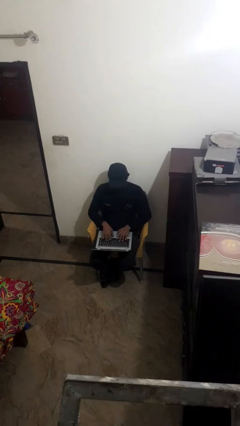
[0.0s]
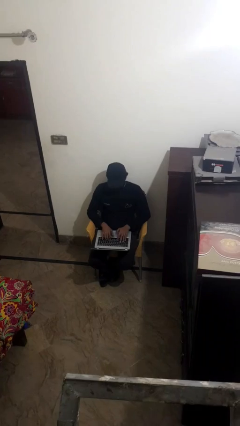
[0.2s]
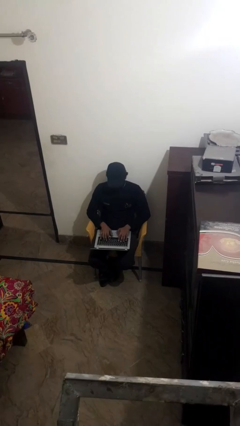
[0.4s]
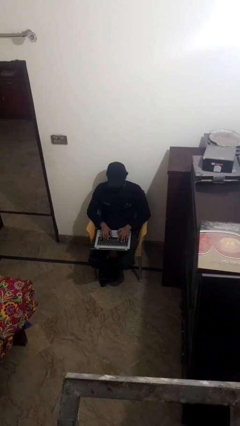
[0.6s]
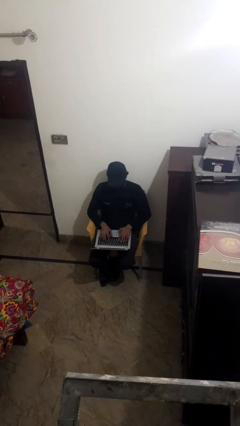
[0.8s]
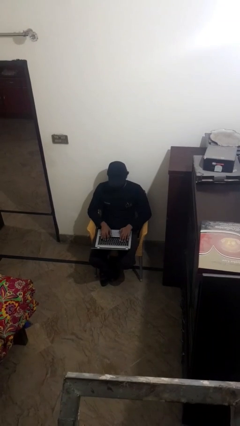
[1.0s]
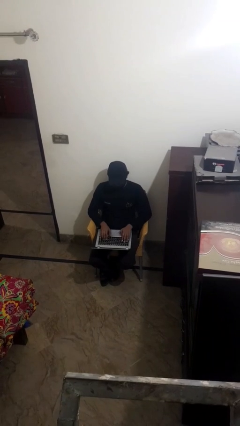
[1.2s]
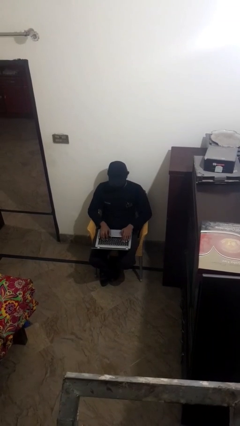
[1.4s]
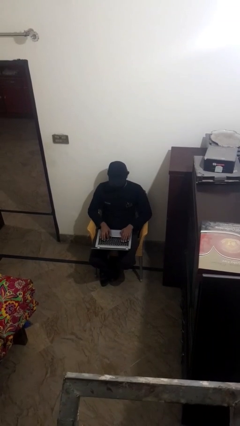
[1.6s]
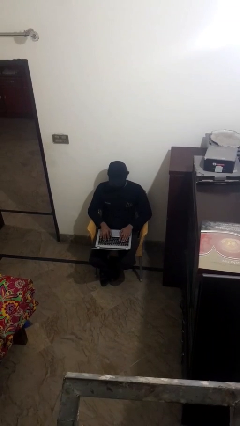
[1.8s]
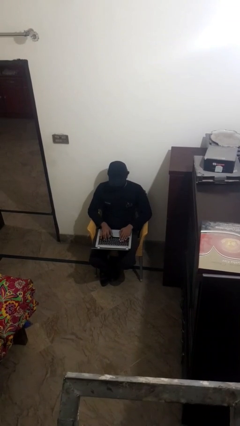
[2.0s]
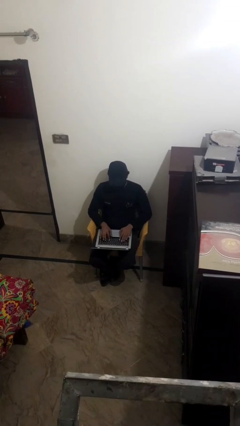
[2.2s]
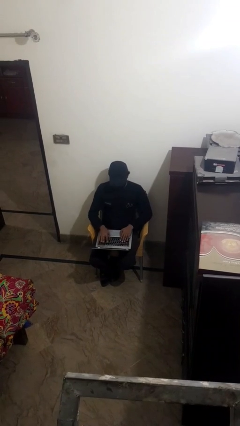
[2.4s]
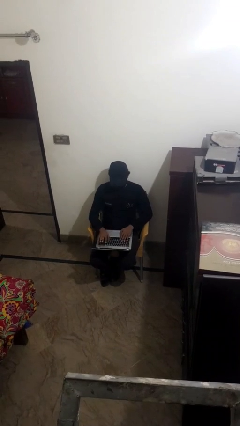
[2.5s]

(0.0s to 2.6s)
person interacts with laptop

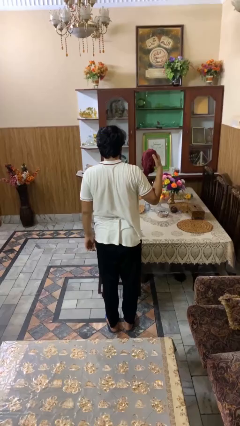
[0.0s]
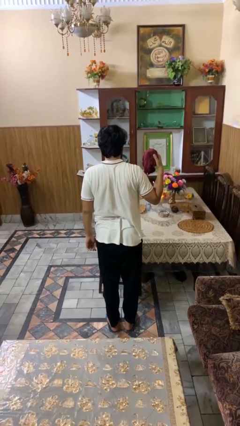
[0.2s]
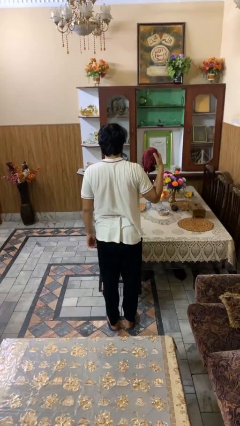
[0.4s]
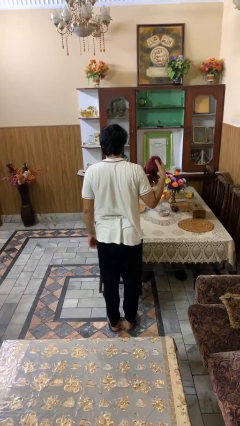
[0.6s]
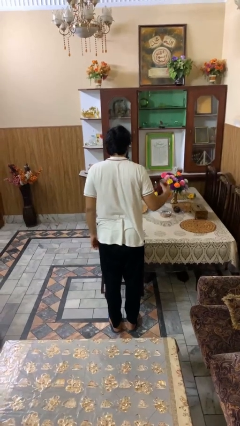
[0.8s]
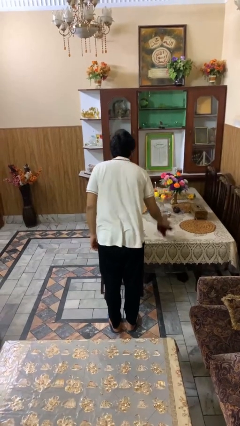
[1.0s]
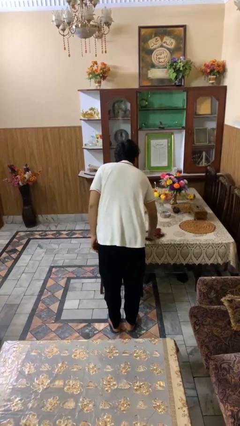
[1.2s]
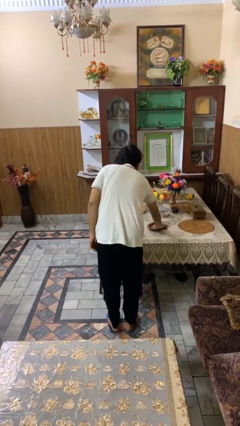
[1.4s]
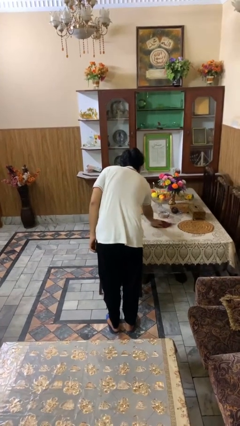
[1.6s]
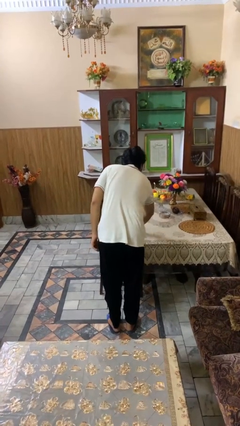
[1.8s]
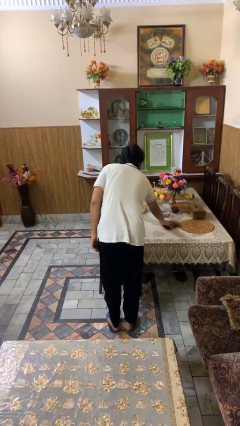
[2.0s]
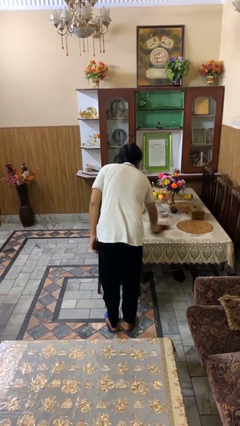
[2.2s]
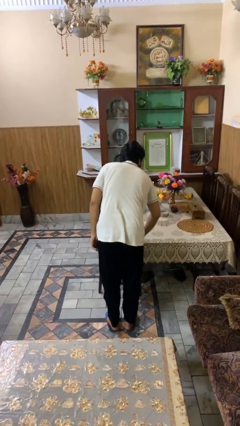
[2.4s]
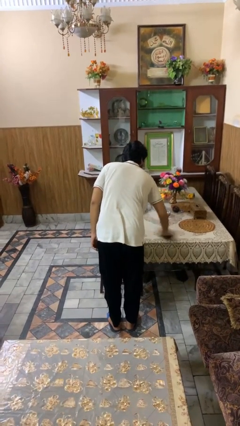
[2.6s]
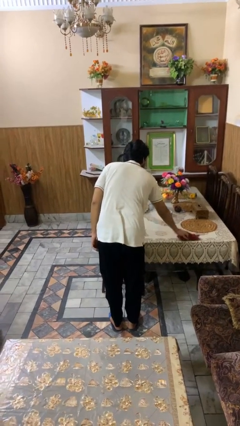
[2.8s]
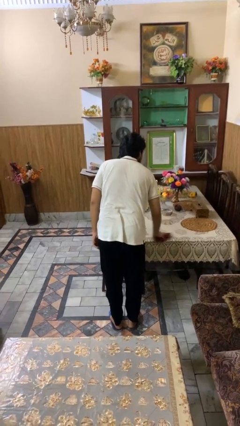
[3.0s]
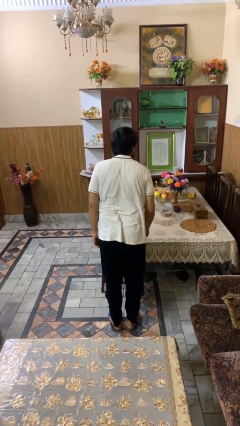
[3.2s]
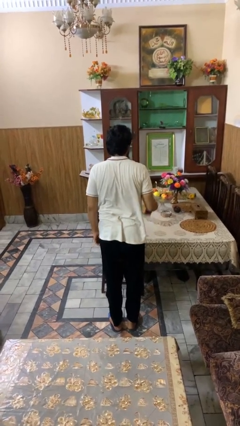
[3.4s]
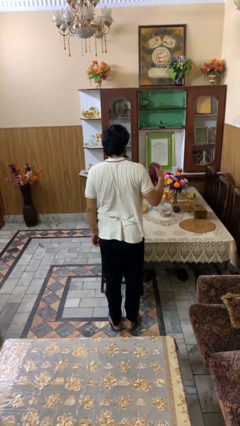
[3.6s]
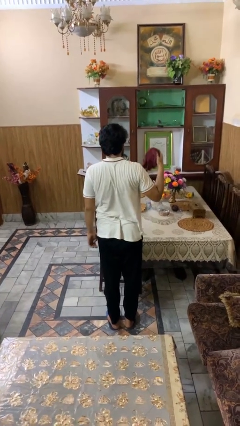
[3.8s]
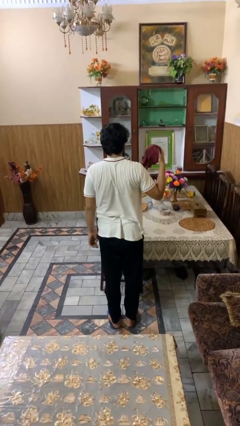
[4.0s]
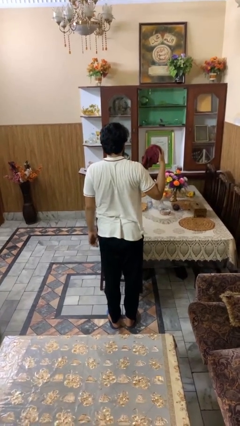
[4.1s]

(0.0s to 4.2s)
person cleans table with rag

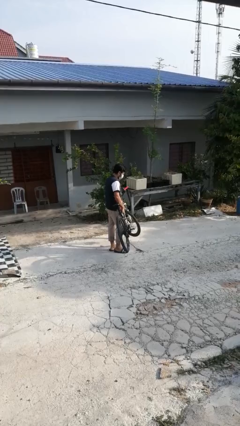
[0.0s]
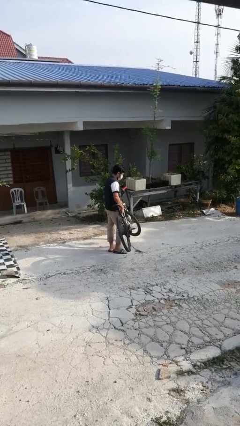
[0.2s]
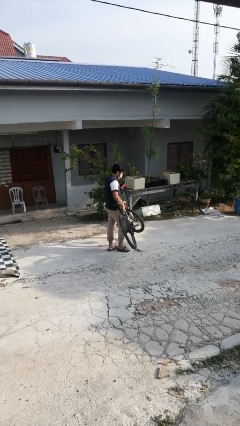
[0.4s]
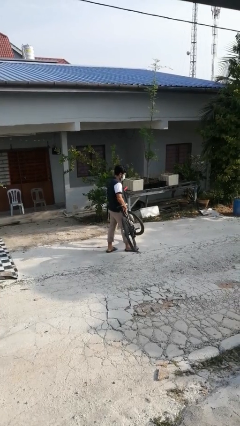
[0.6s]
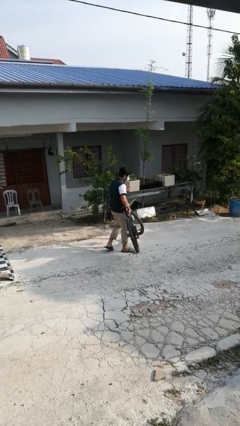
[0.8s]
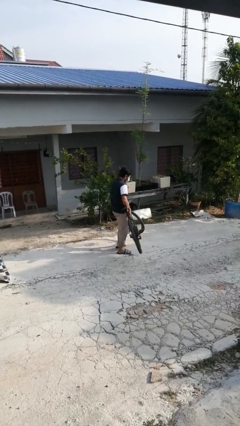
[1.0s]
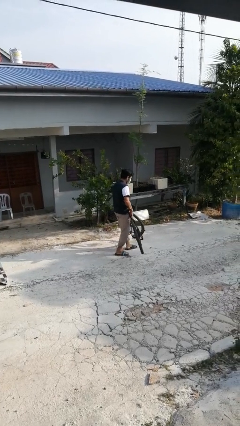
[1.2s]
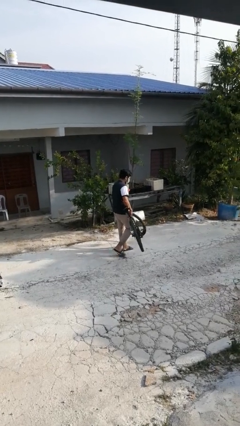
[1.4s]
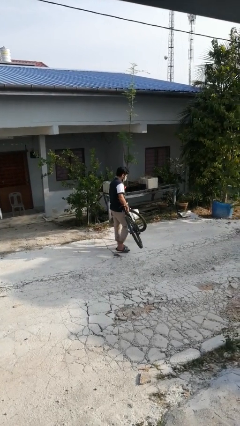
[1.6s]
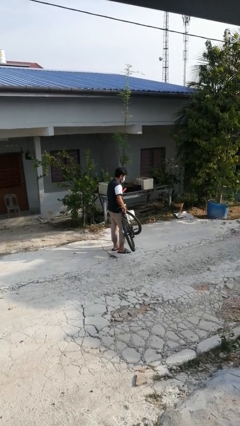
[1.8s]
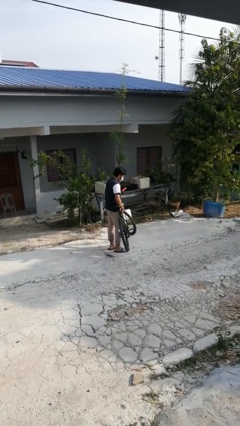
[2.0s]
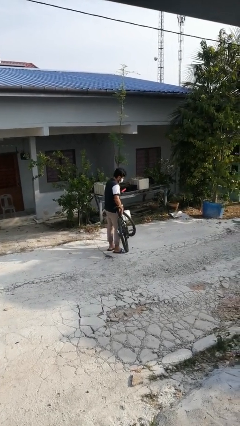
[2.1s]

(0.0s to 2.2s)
person carries bicycle

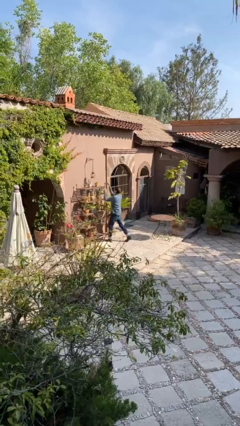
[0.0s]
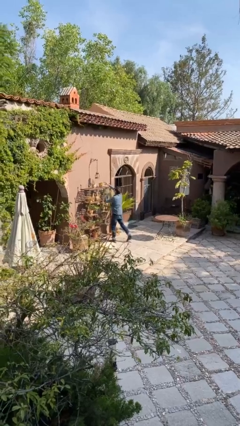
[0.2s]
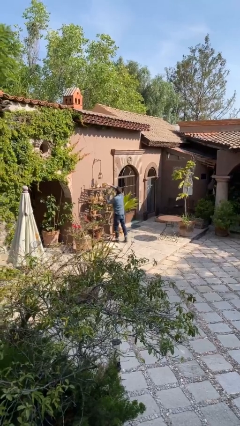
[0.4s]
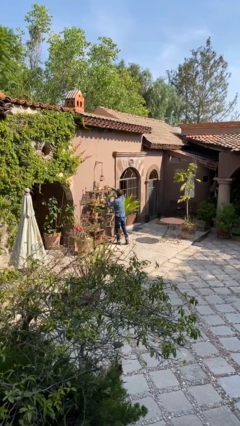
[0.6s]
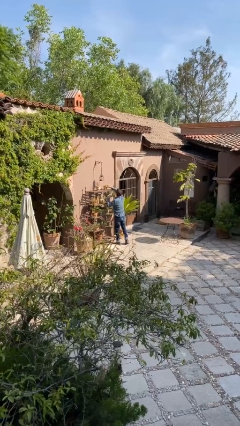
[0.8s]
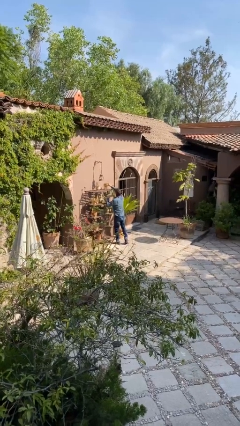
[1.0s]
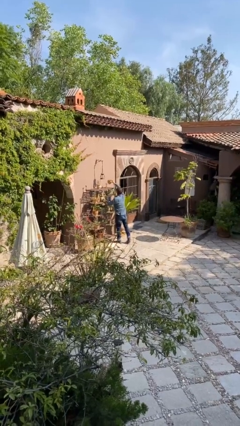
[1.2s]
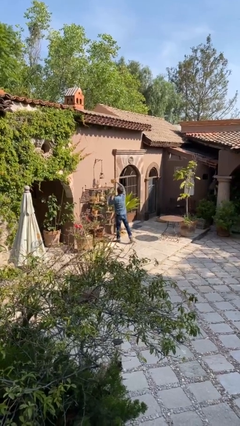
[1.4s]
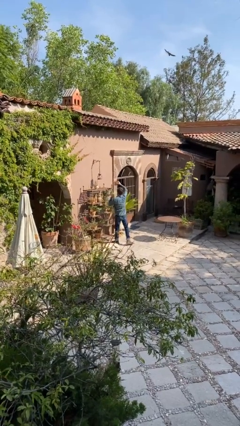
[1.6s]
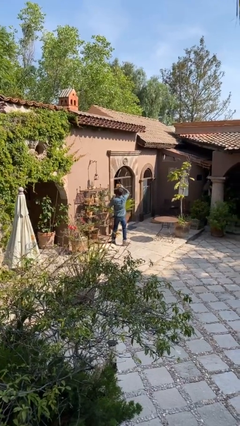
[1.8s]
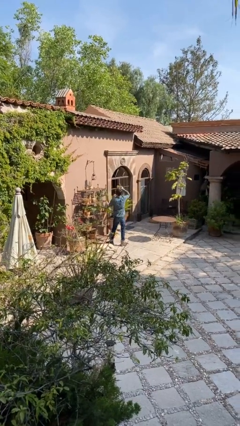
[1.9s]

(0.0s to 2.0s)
person picks up object from shelf

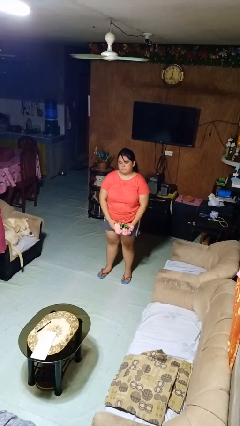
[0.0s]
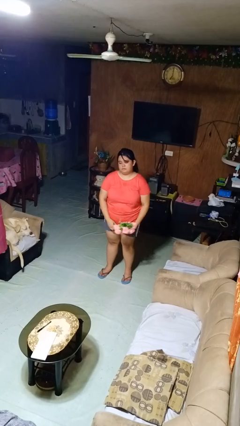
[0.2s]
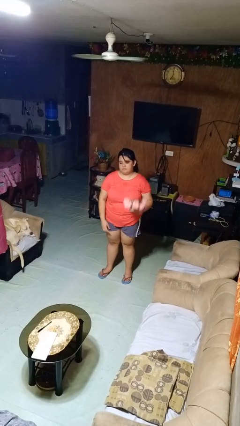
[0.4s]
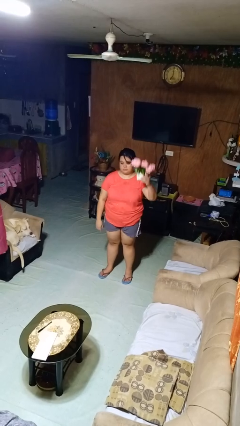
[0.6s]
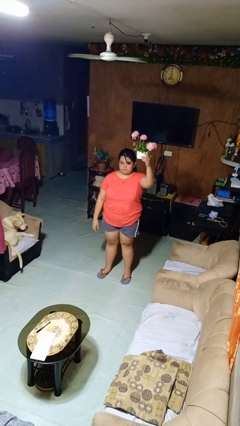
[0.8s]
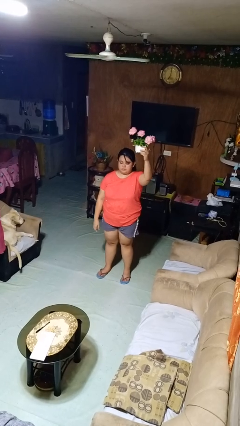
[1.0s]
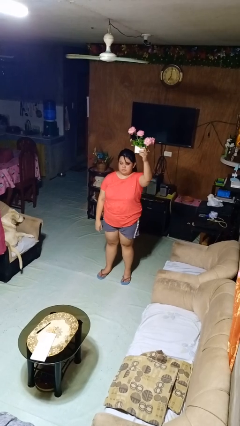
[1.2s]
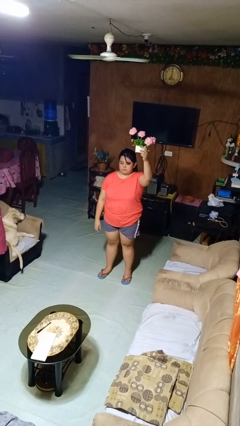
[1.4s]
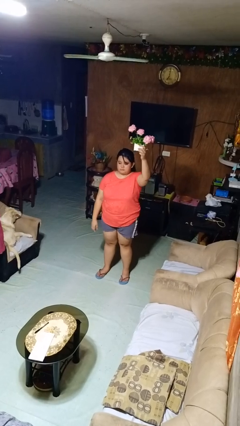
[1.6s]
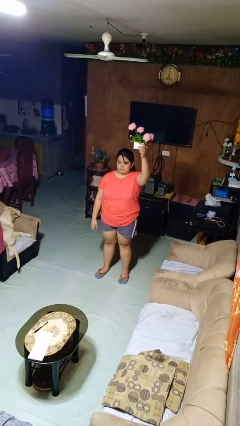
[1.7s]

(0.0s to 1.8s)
person holds object above head

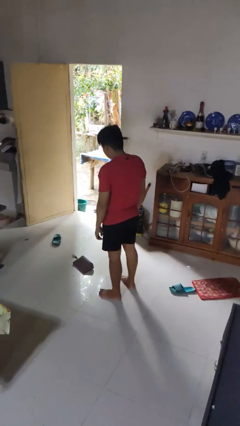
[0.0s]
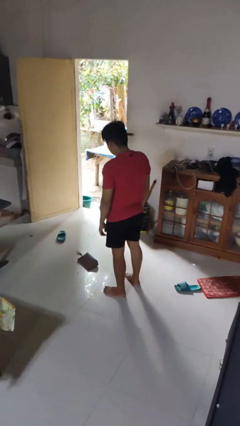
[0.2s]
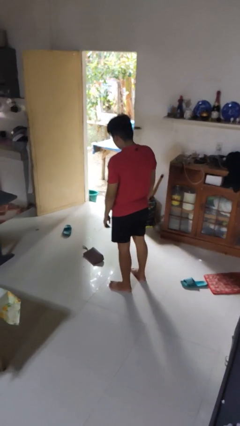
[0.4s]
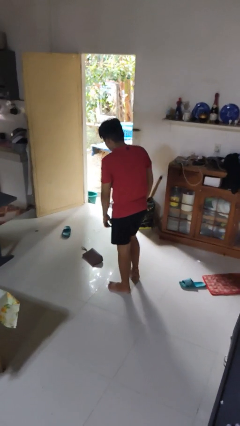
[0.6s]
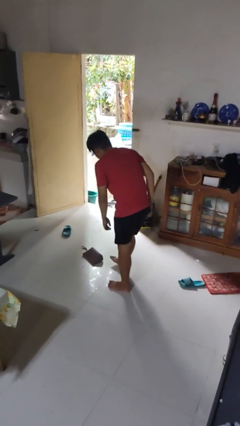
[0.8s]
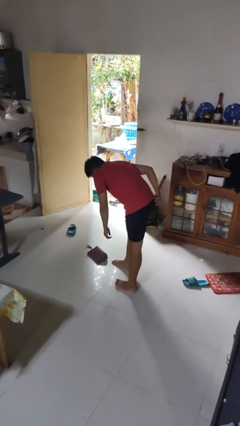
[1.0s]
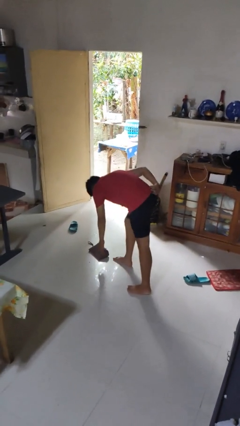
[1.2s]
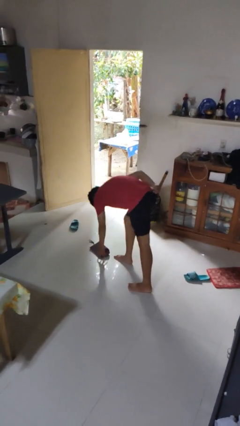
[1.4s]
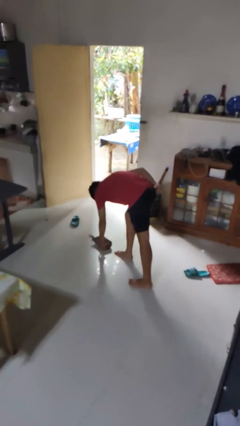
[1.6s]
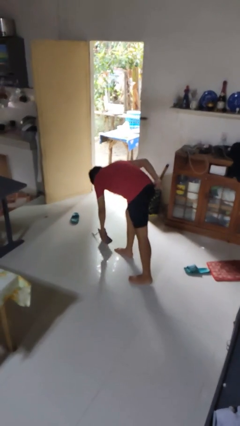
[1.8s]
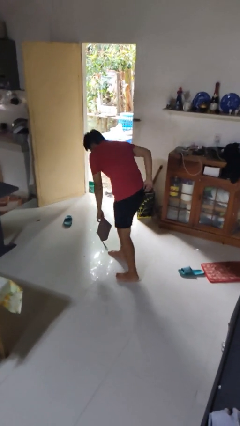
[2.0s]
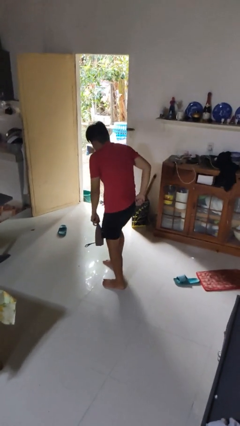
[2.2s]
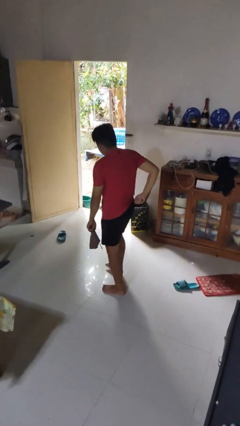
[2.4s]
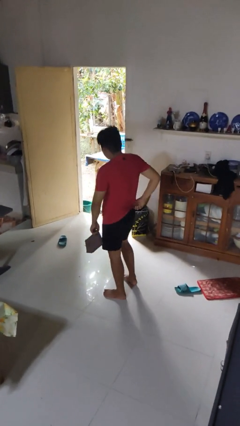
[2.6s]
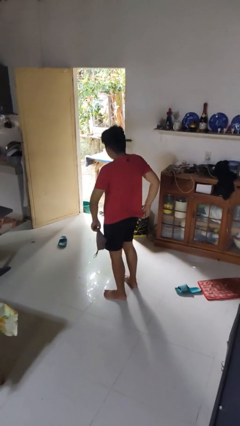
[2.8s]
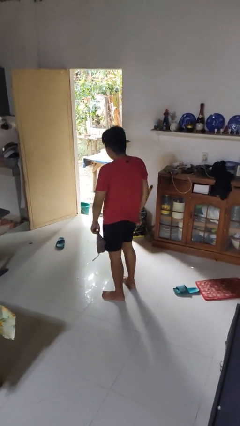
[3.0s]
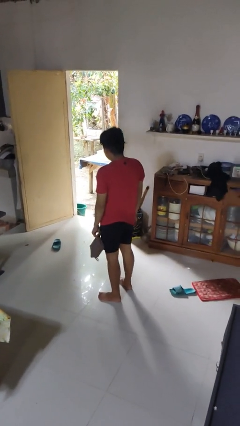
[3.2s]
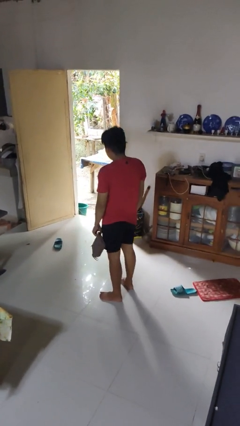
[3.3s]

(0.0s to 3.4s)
person picks up object from floor

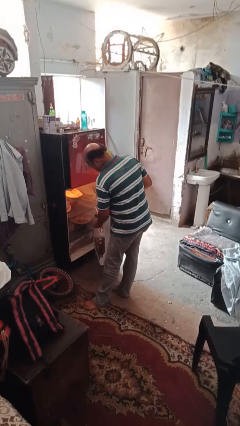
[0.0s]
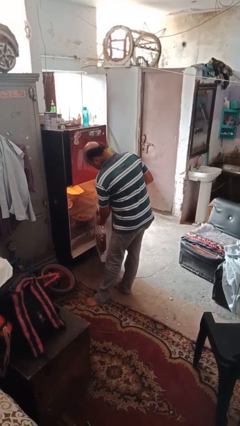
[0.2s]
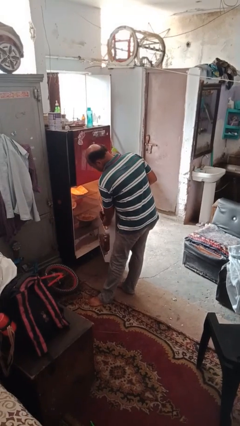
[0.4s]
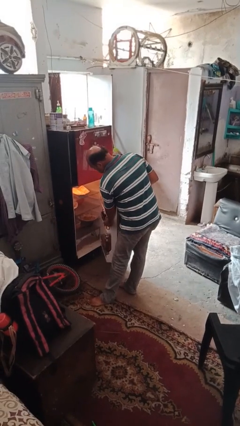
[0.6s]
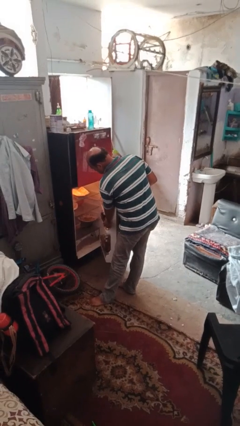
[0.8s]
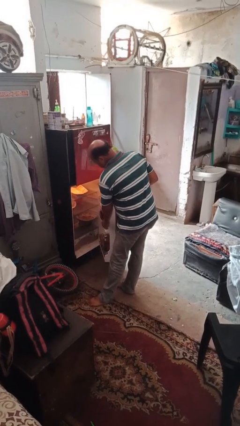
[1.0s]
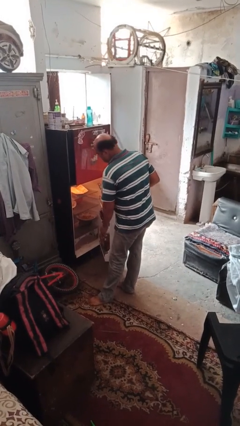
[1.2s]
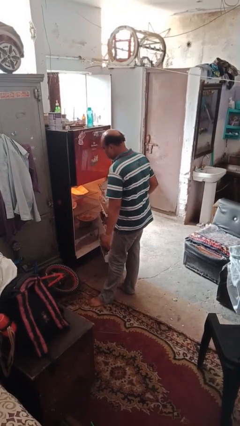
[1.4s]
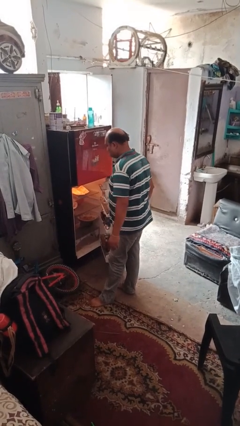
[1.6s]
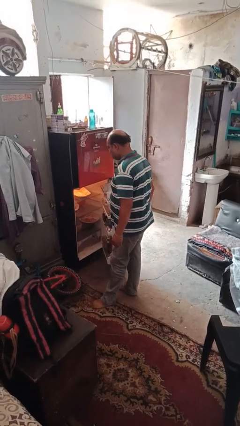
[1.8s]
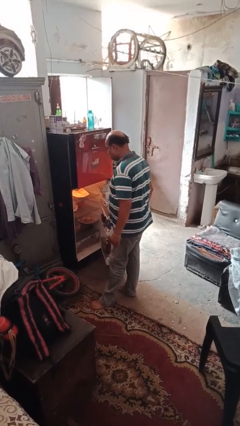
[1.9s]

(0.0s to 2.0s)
person puts object into refrigerator
